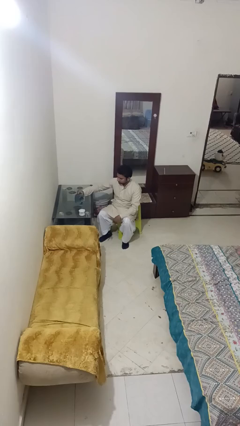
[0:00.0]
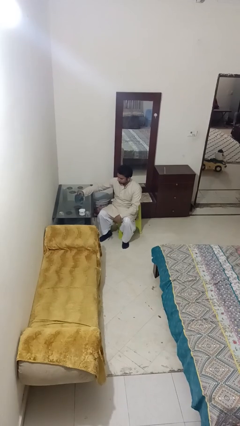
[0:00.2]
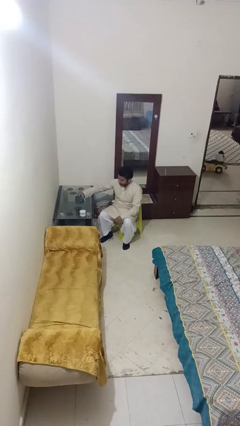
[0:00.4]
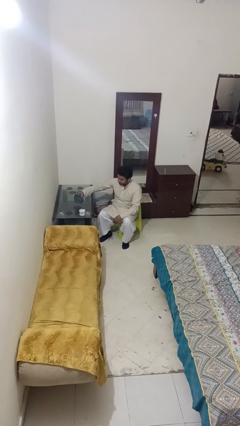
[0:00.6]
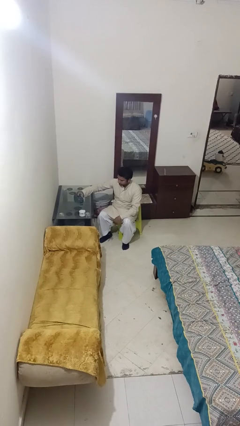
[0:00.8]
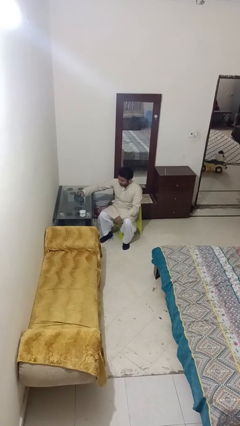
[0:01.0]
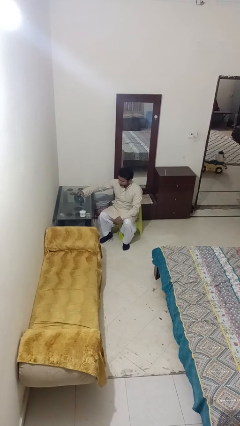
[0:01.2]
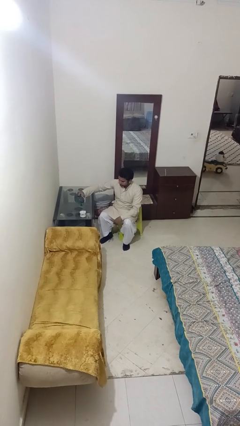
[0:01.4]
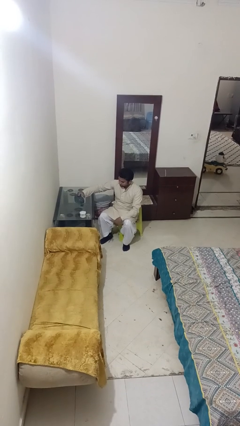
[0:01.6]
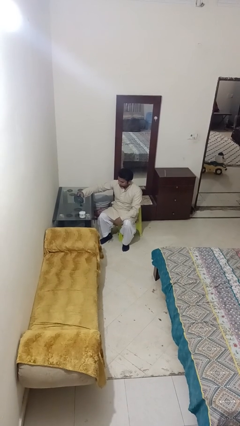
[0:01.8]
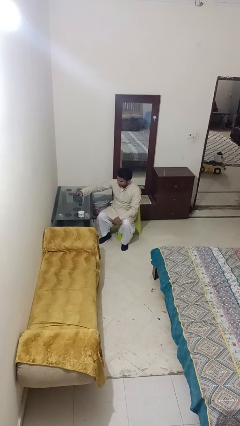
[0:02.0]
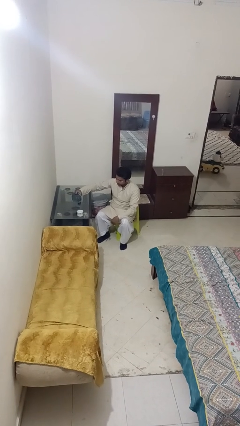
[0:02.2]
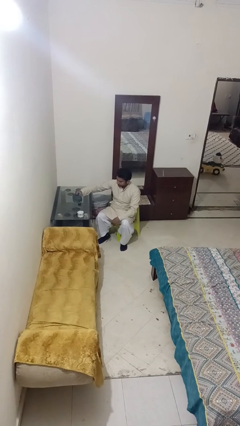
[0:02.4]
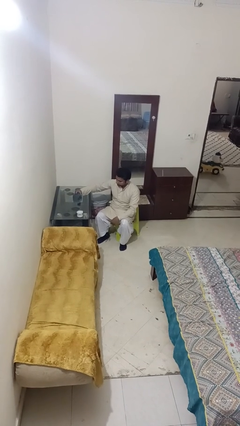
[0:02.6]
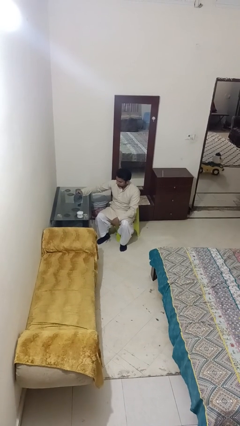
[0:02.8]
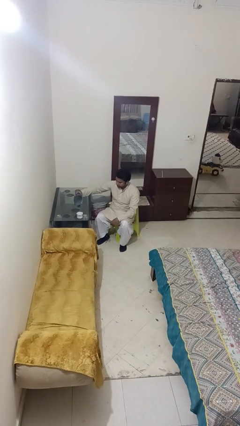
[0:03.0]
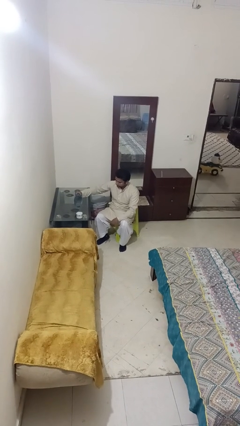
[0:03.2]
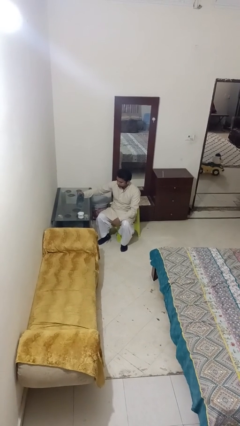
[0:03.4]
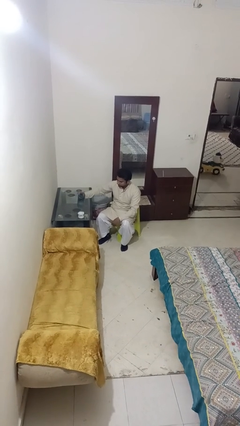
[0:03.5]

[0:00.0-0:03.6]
person pours liquid into cup

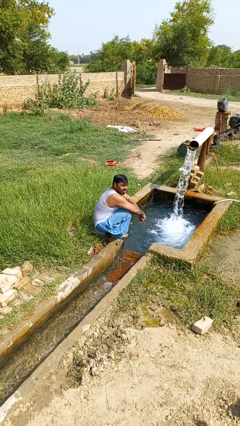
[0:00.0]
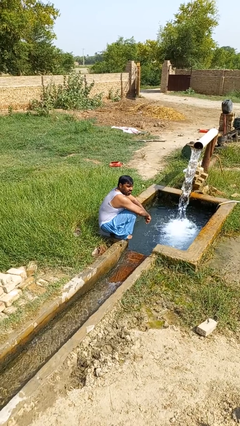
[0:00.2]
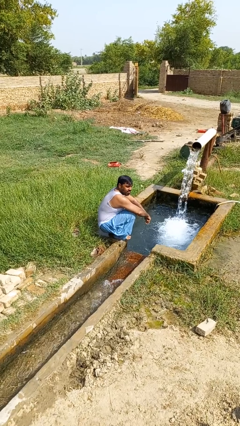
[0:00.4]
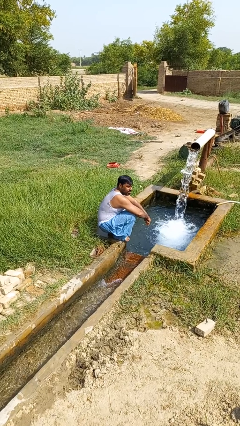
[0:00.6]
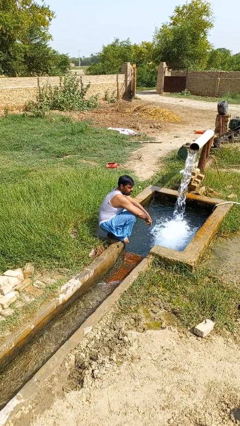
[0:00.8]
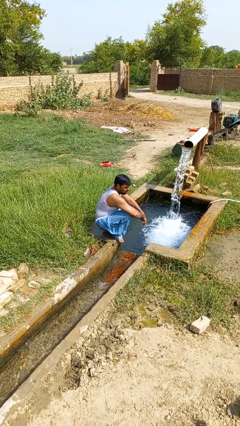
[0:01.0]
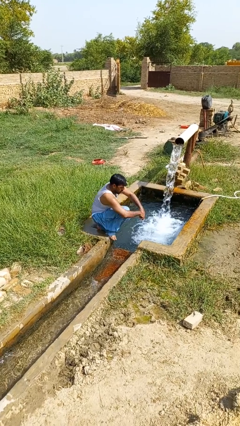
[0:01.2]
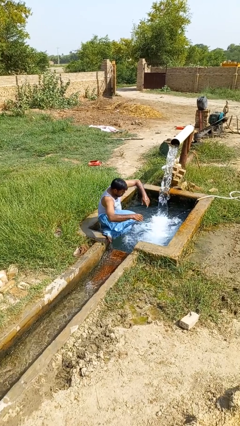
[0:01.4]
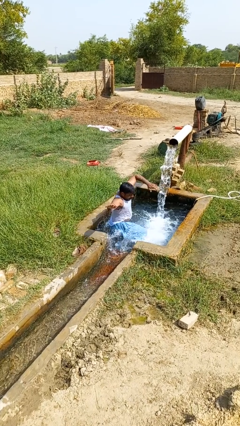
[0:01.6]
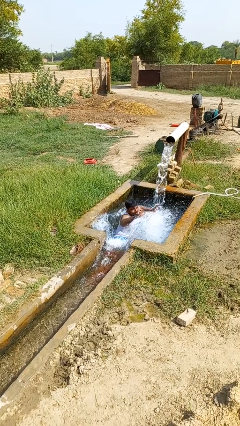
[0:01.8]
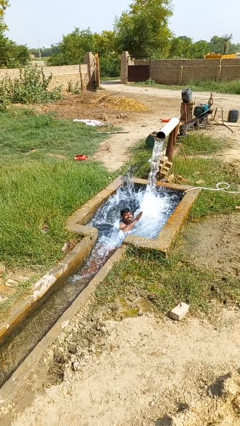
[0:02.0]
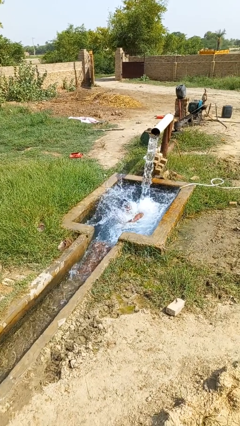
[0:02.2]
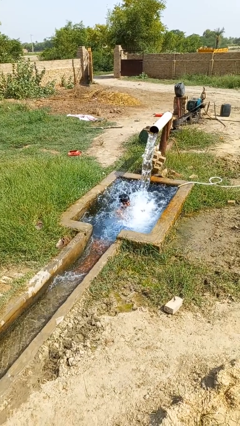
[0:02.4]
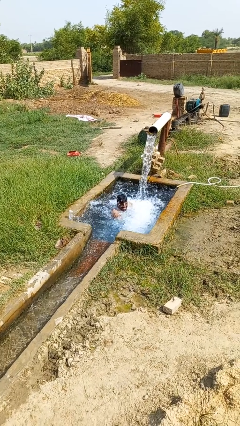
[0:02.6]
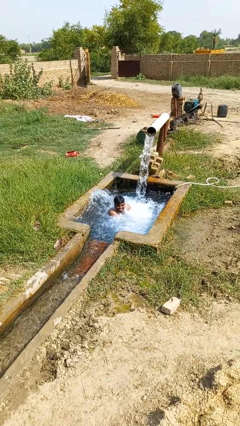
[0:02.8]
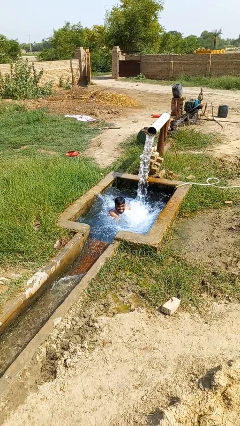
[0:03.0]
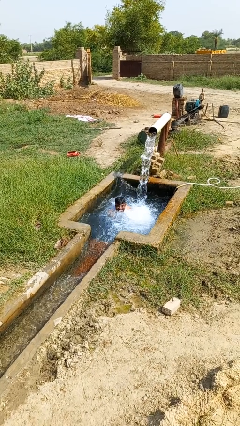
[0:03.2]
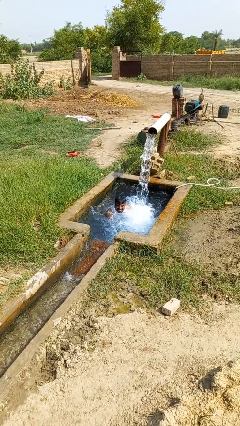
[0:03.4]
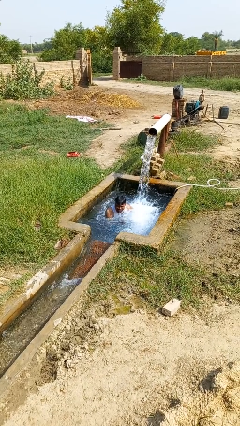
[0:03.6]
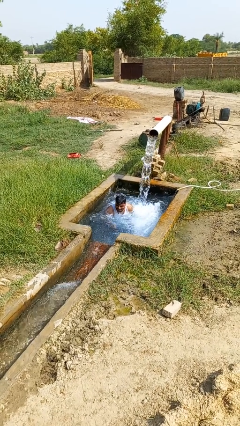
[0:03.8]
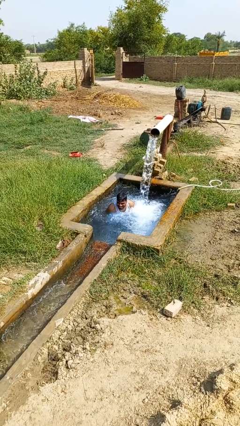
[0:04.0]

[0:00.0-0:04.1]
person falls into pool

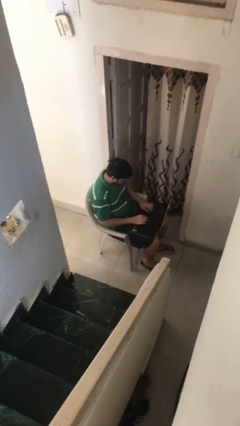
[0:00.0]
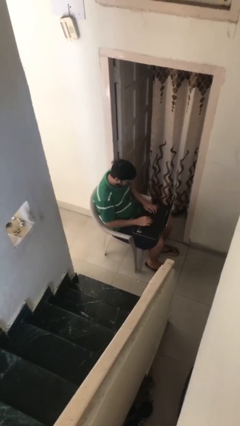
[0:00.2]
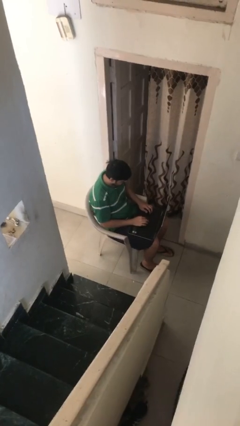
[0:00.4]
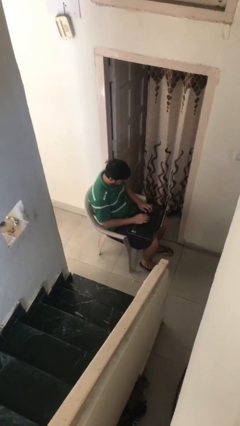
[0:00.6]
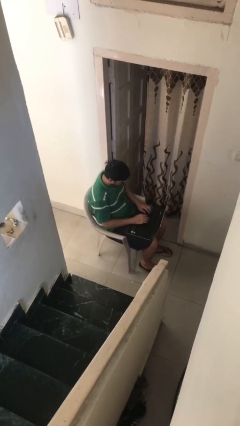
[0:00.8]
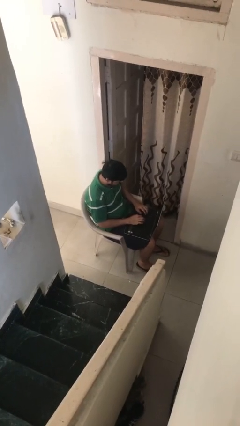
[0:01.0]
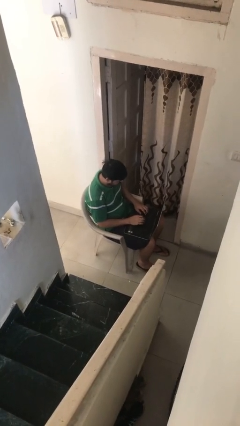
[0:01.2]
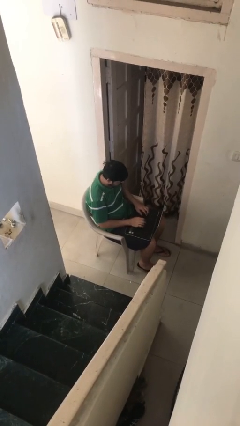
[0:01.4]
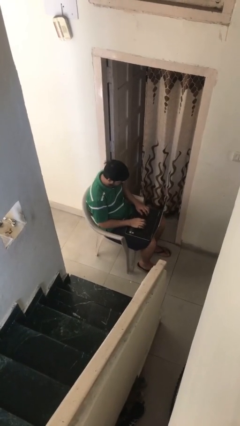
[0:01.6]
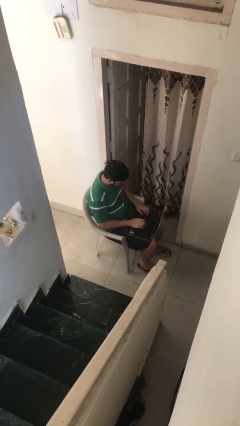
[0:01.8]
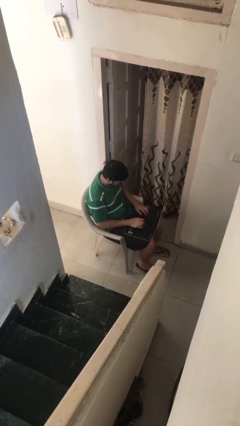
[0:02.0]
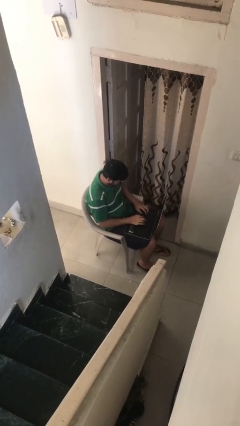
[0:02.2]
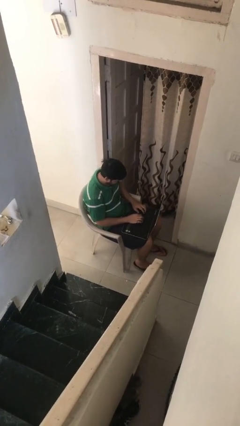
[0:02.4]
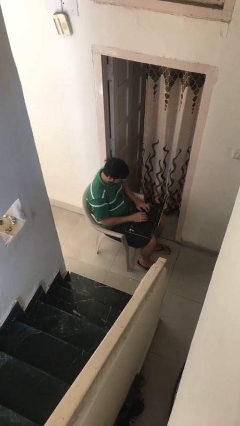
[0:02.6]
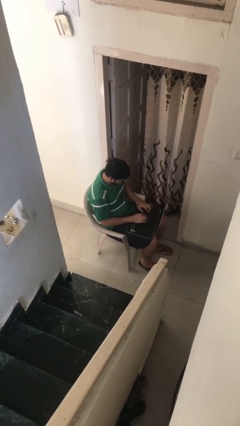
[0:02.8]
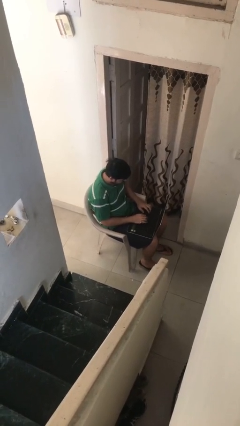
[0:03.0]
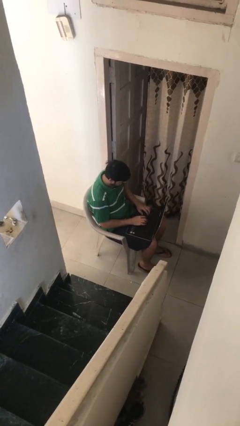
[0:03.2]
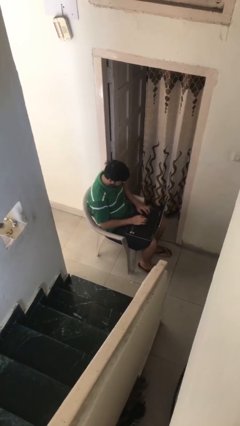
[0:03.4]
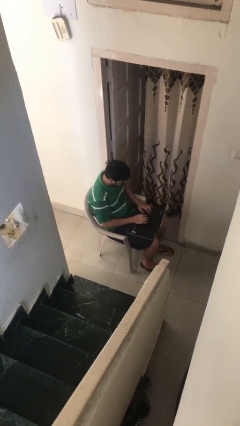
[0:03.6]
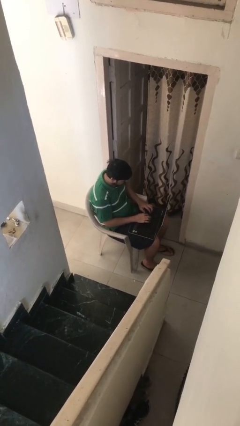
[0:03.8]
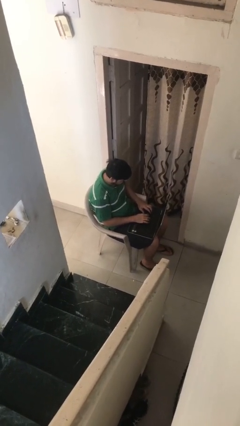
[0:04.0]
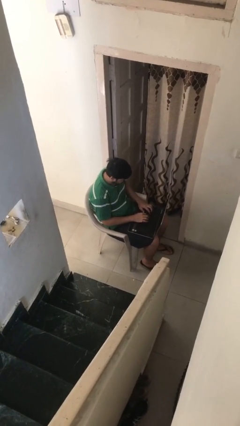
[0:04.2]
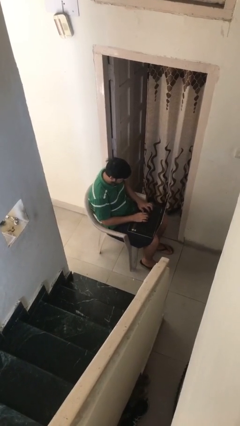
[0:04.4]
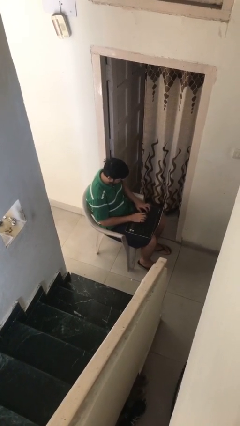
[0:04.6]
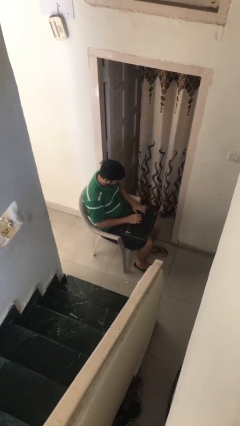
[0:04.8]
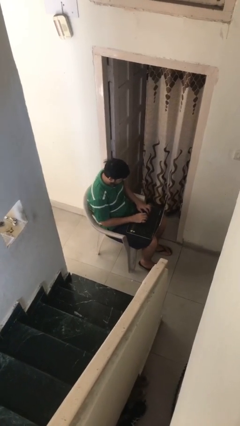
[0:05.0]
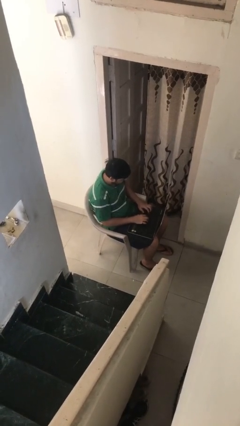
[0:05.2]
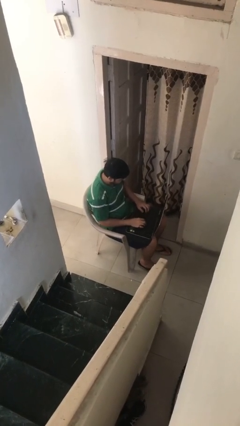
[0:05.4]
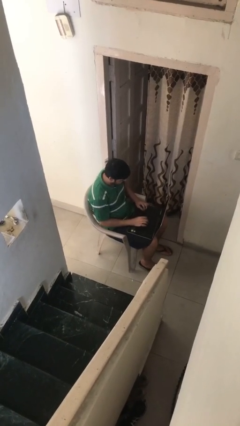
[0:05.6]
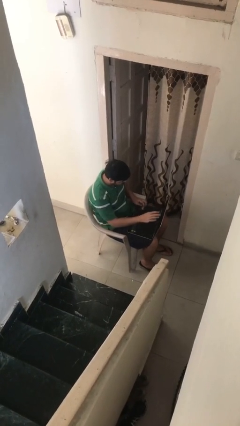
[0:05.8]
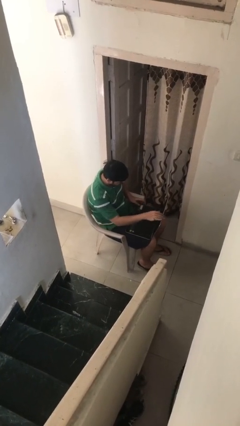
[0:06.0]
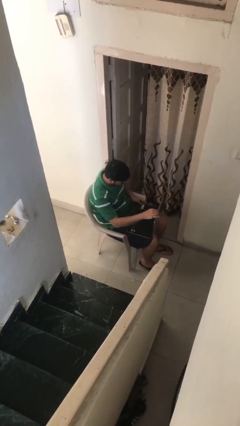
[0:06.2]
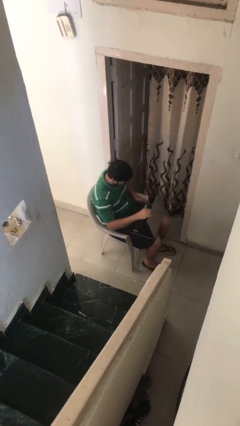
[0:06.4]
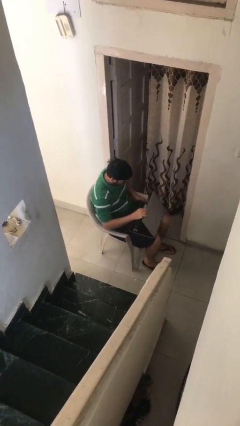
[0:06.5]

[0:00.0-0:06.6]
person interacts with laptop

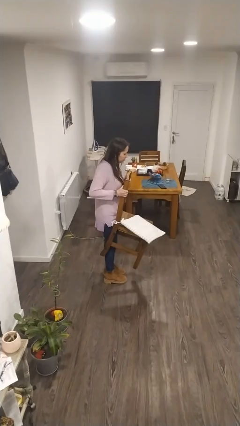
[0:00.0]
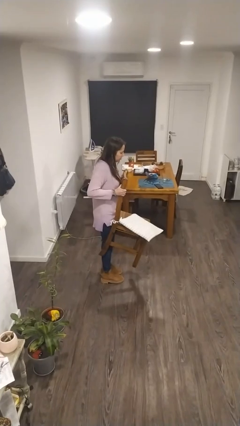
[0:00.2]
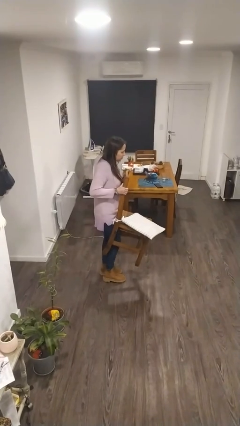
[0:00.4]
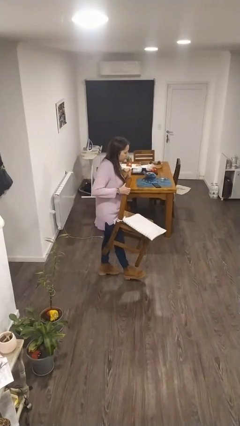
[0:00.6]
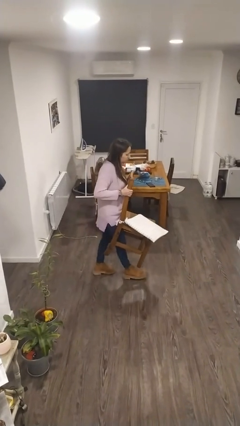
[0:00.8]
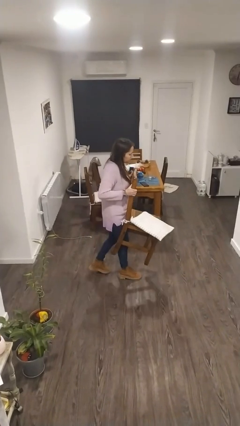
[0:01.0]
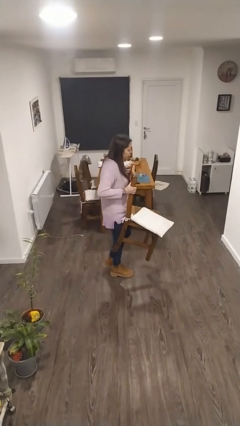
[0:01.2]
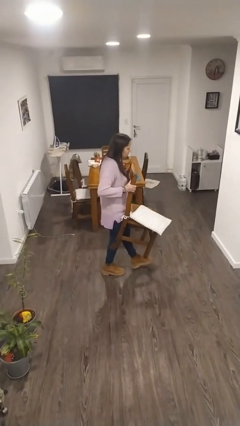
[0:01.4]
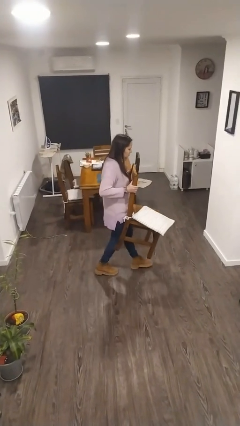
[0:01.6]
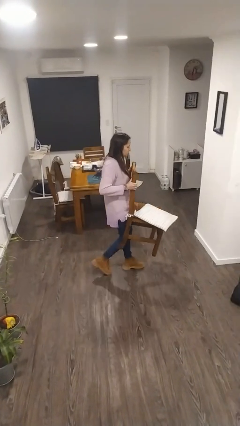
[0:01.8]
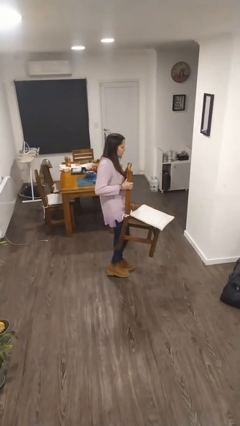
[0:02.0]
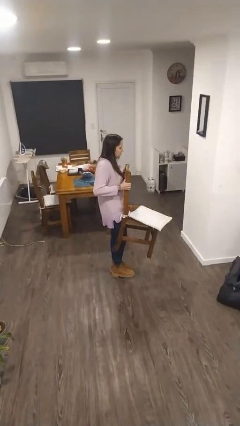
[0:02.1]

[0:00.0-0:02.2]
person carries furniture

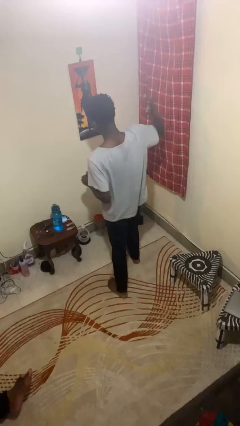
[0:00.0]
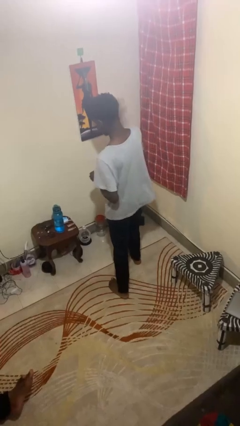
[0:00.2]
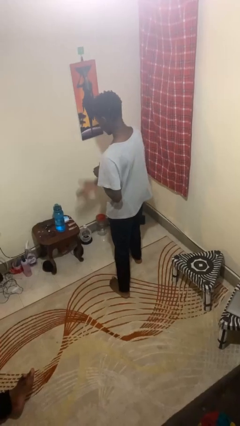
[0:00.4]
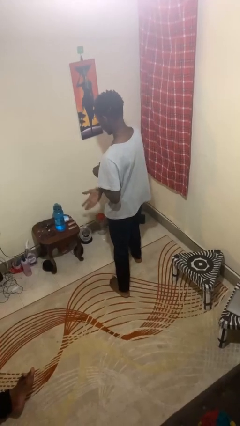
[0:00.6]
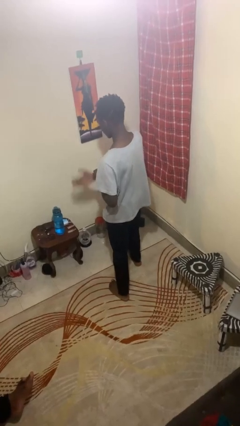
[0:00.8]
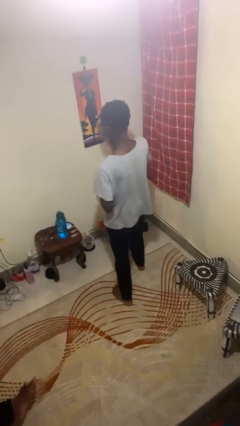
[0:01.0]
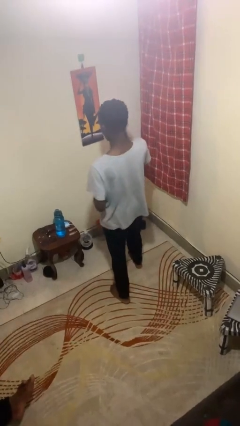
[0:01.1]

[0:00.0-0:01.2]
person karate chop
